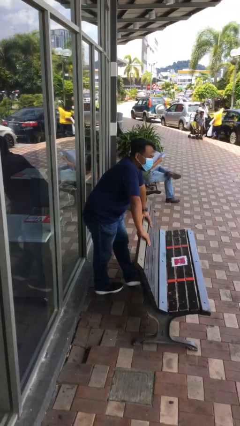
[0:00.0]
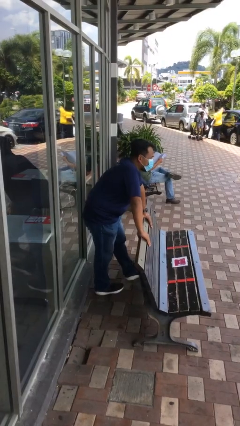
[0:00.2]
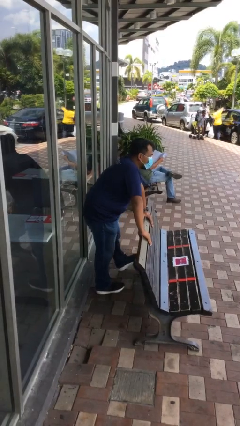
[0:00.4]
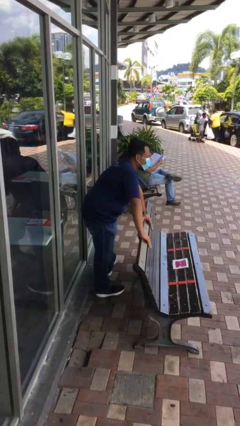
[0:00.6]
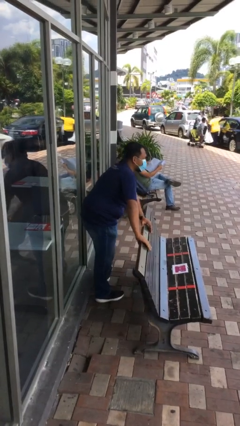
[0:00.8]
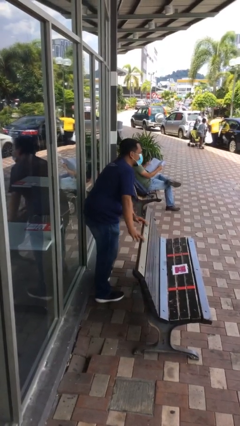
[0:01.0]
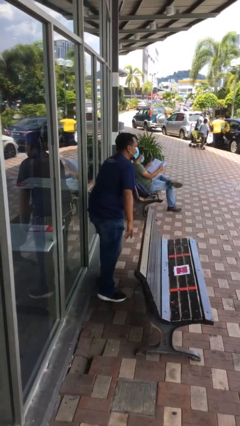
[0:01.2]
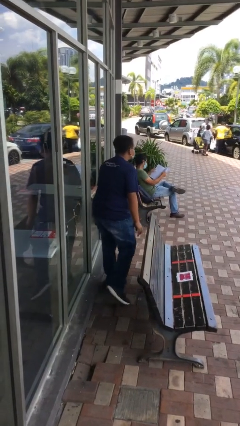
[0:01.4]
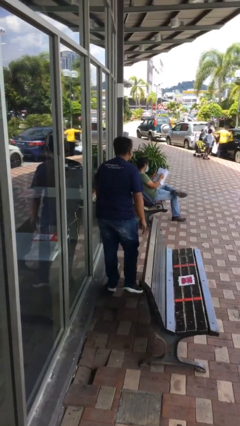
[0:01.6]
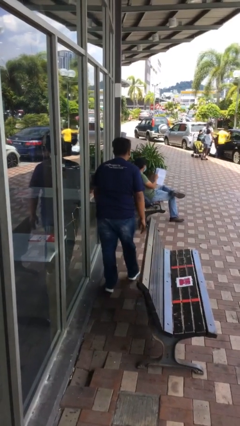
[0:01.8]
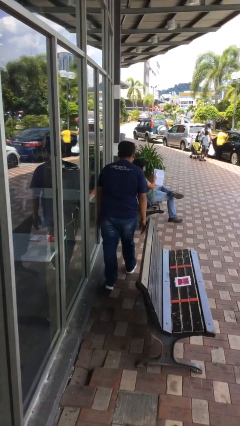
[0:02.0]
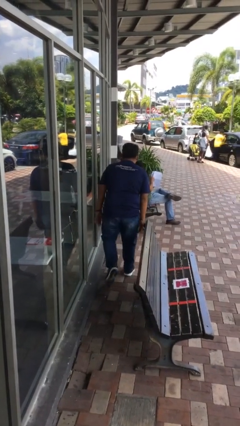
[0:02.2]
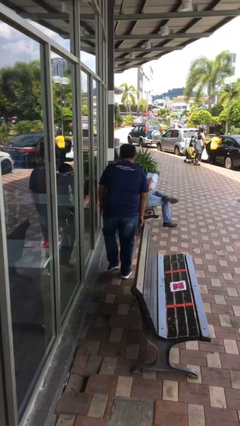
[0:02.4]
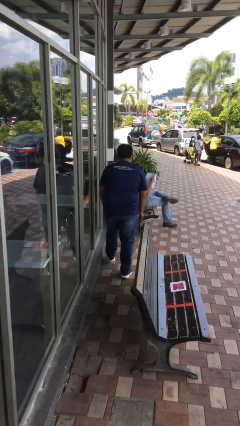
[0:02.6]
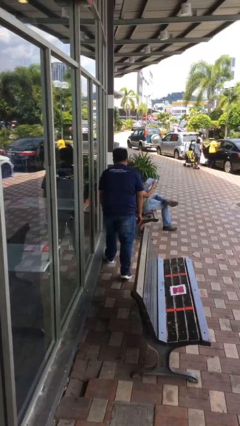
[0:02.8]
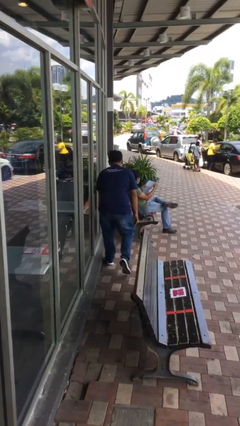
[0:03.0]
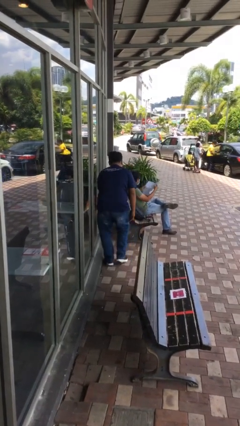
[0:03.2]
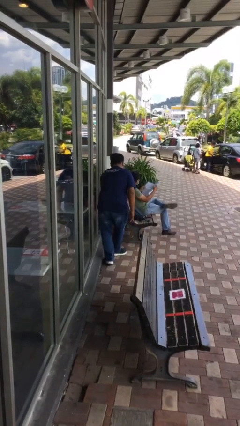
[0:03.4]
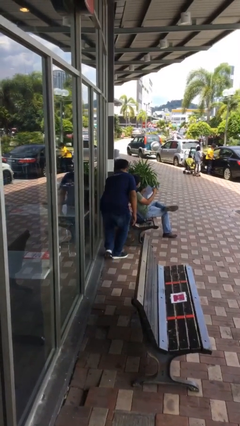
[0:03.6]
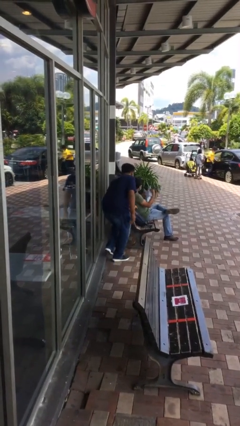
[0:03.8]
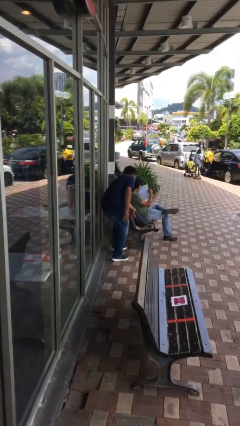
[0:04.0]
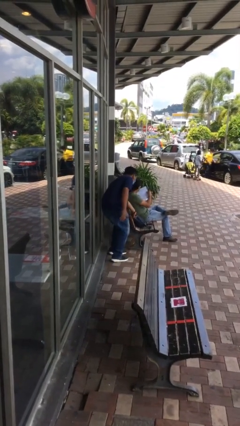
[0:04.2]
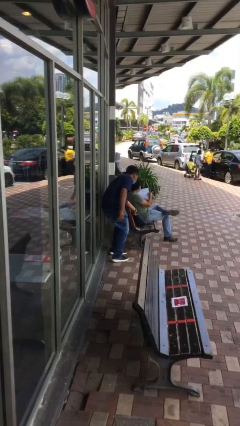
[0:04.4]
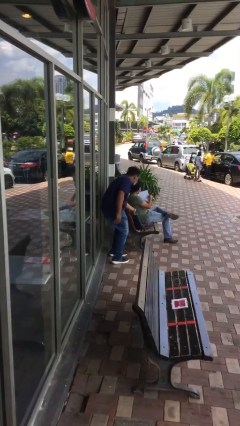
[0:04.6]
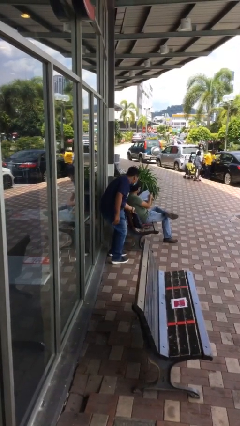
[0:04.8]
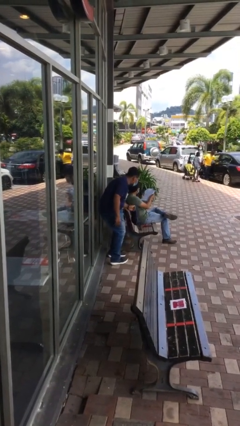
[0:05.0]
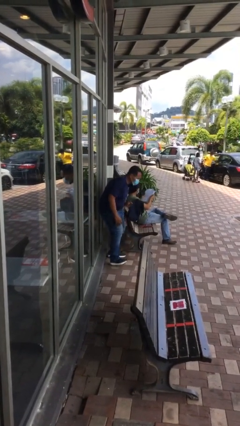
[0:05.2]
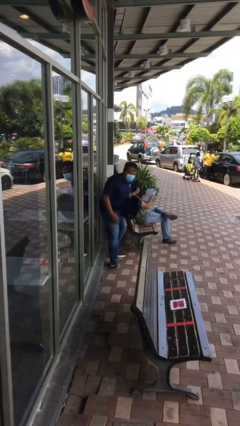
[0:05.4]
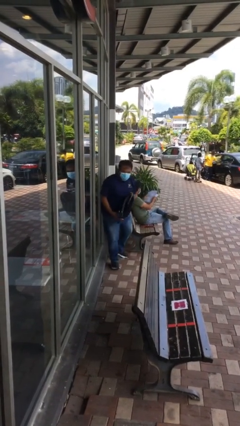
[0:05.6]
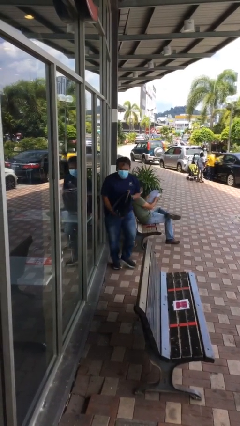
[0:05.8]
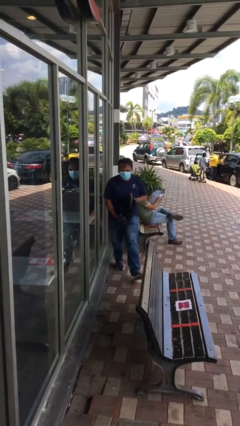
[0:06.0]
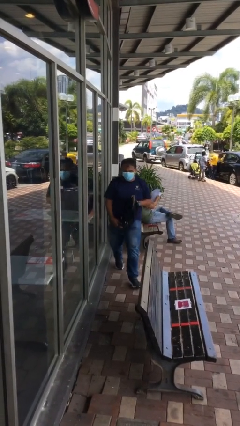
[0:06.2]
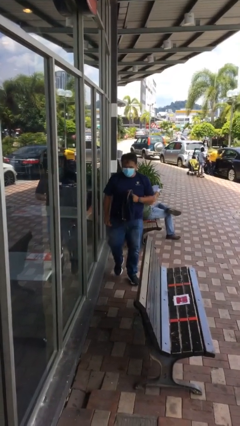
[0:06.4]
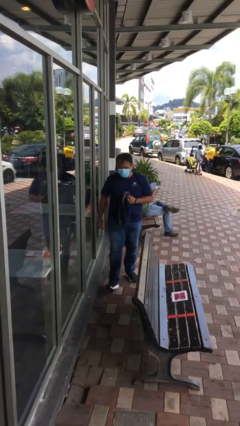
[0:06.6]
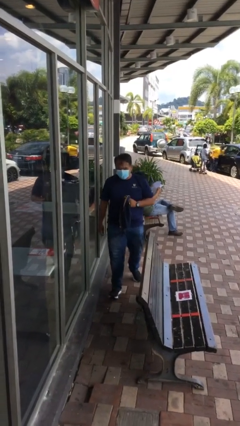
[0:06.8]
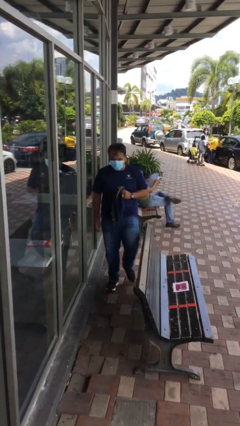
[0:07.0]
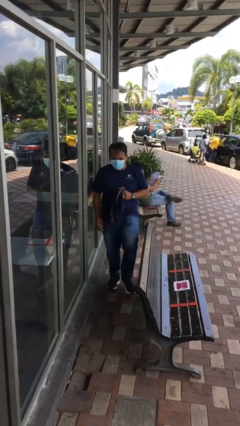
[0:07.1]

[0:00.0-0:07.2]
person steals object from person

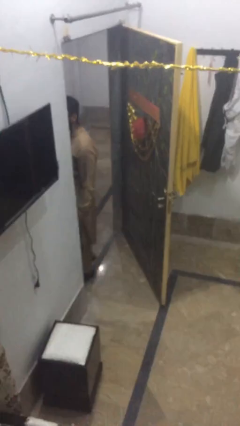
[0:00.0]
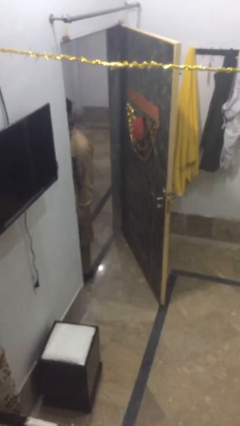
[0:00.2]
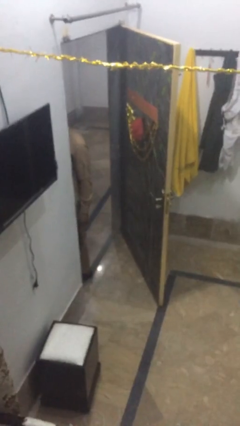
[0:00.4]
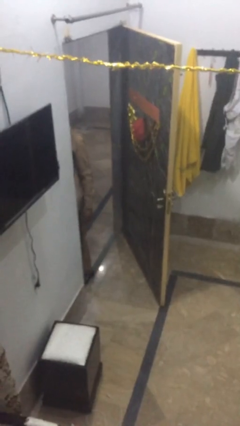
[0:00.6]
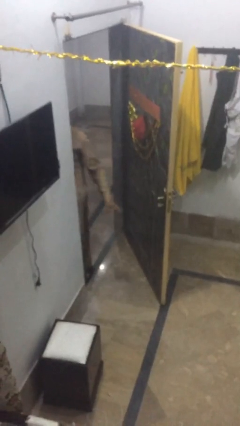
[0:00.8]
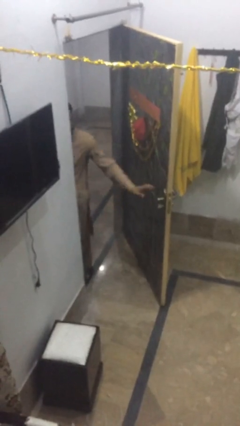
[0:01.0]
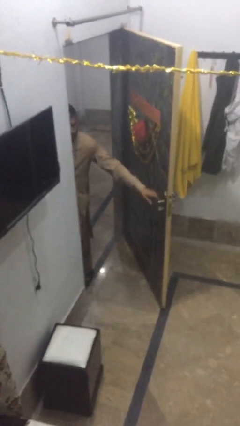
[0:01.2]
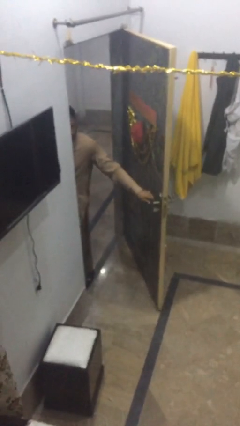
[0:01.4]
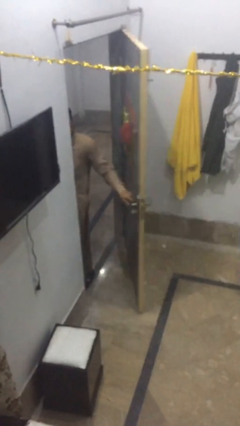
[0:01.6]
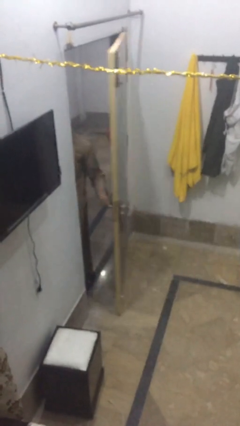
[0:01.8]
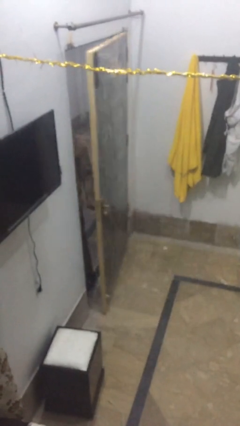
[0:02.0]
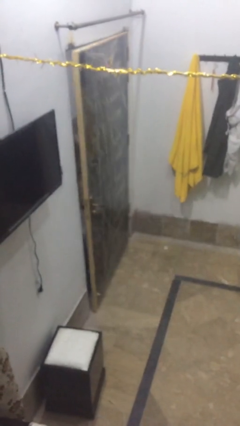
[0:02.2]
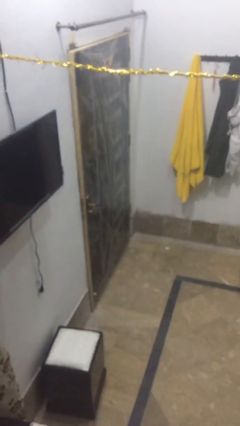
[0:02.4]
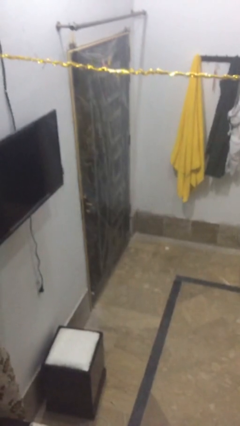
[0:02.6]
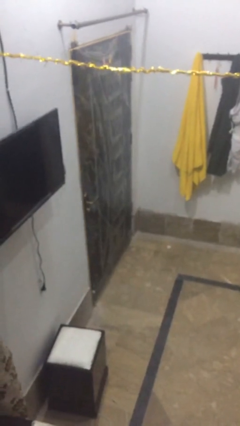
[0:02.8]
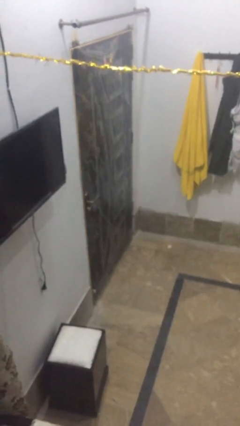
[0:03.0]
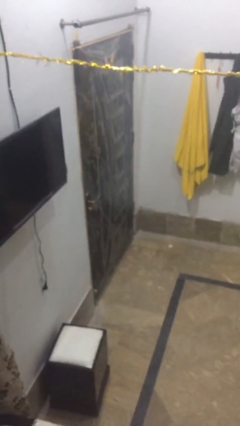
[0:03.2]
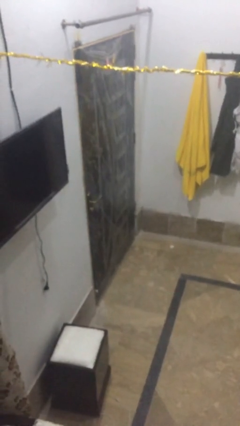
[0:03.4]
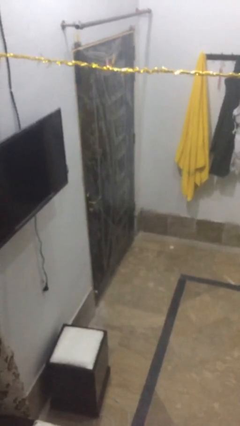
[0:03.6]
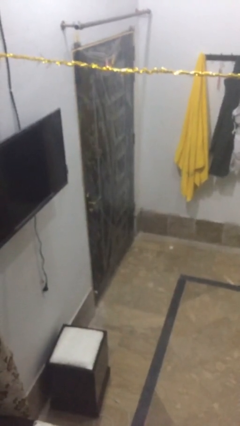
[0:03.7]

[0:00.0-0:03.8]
person closes facility door

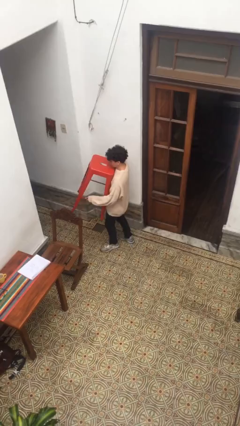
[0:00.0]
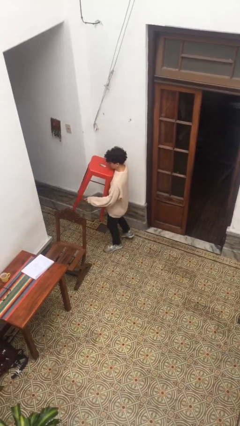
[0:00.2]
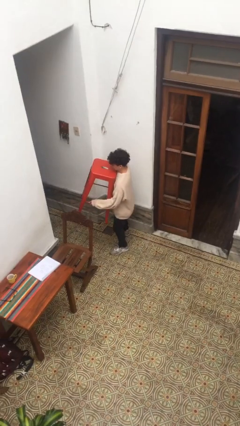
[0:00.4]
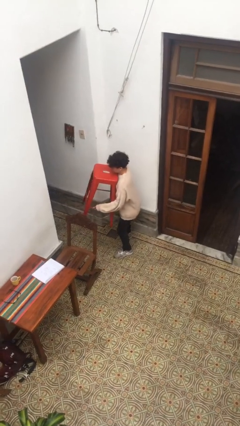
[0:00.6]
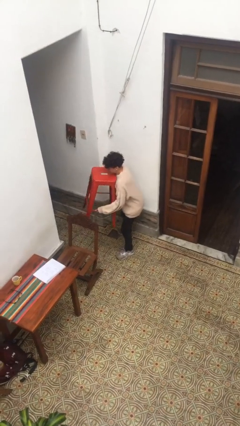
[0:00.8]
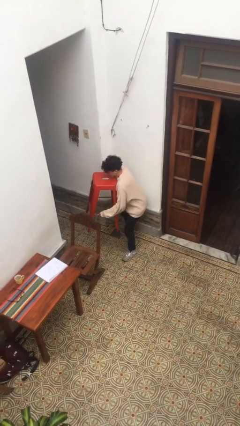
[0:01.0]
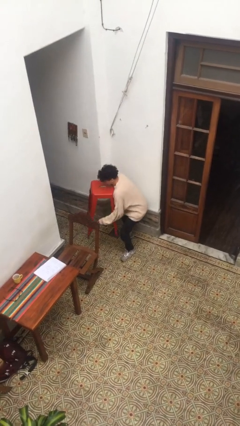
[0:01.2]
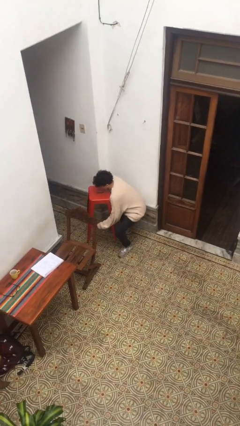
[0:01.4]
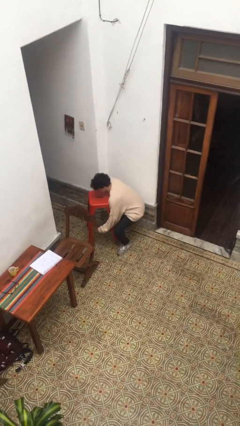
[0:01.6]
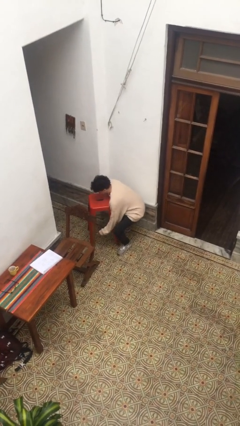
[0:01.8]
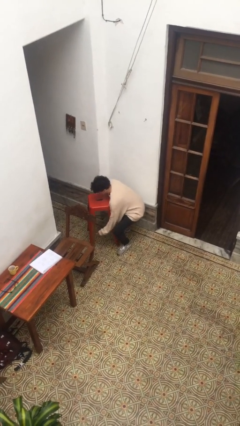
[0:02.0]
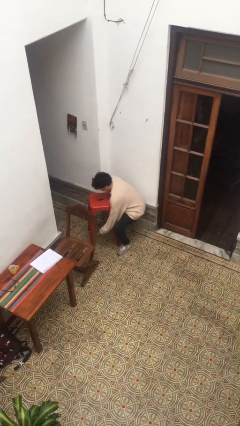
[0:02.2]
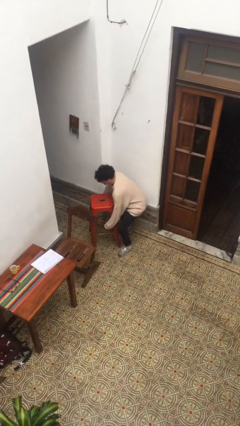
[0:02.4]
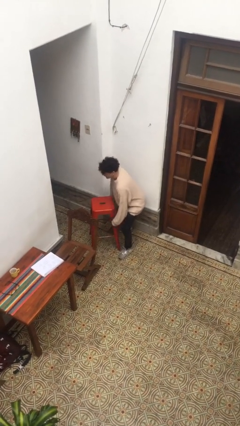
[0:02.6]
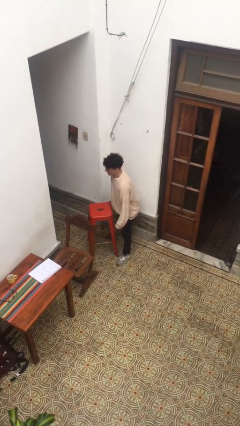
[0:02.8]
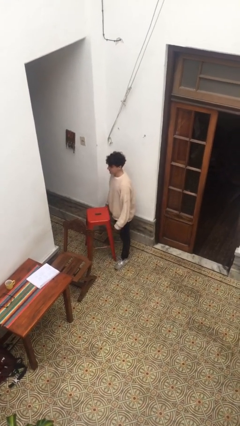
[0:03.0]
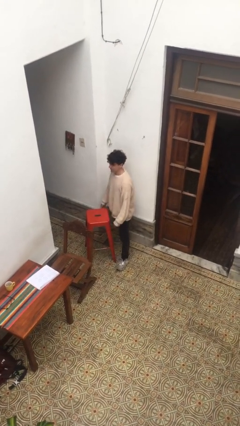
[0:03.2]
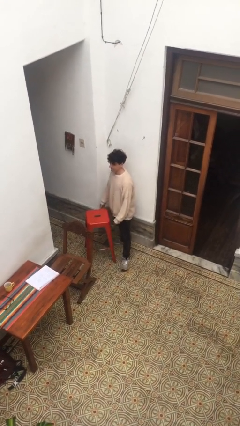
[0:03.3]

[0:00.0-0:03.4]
person puts down object on floor

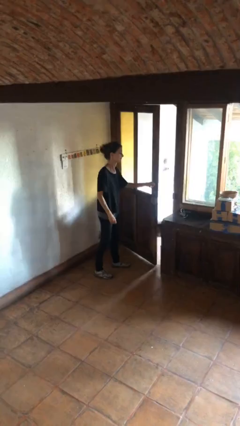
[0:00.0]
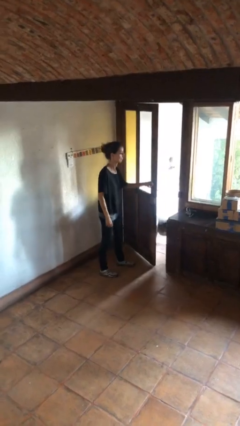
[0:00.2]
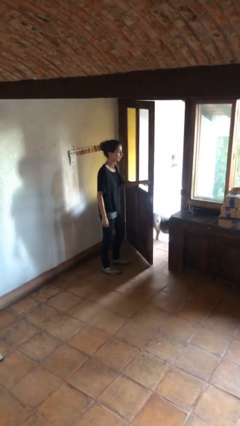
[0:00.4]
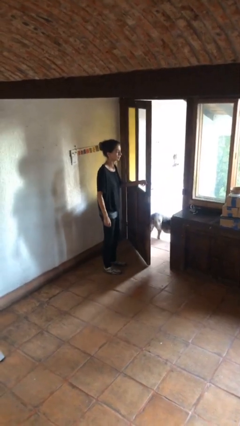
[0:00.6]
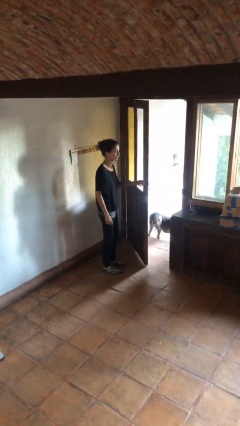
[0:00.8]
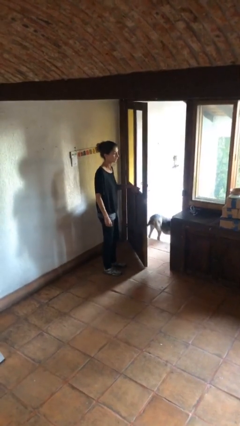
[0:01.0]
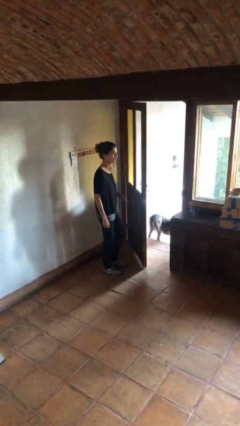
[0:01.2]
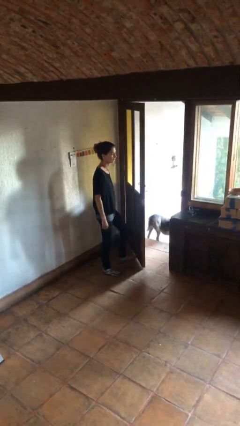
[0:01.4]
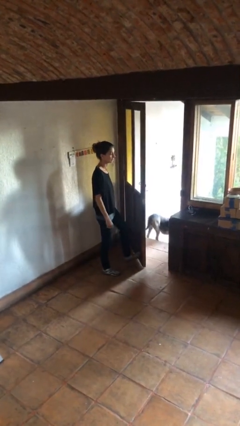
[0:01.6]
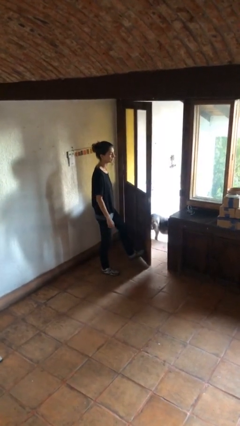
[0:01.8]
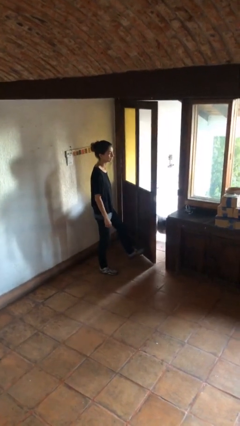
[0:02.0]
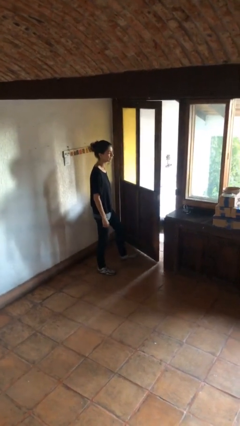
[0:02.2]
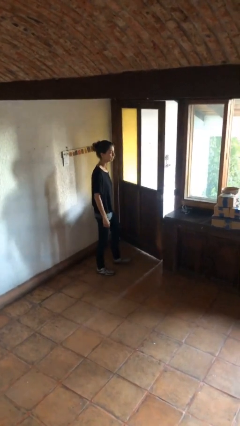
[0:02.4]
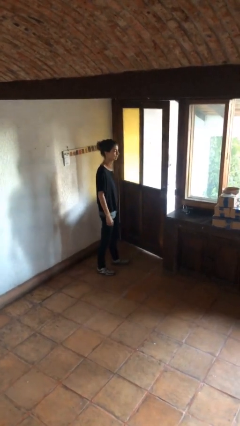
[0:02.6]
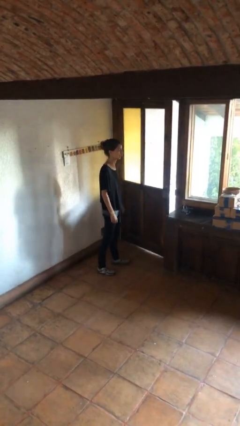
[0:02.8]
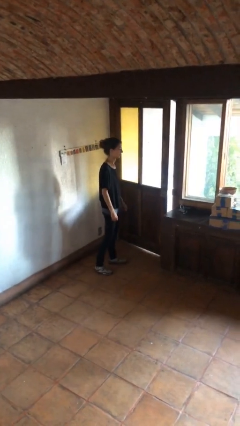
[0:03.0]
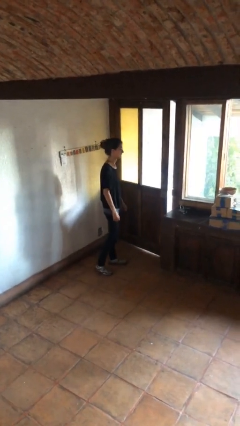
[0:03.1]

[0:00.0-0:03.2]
person closes door with foot

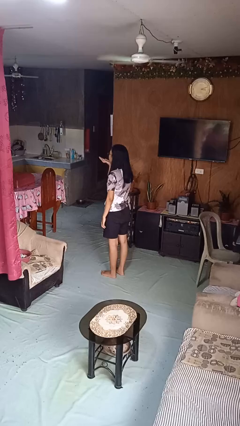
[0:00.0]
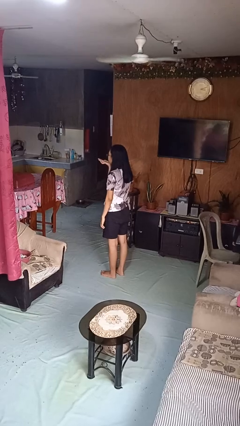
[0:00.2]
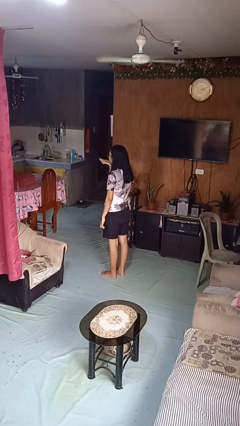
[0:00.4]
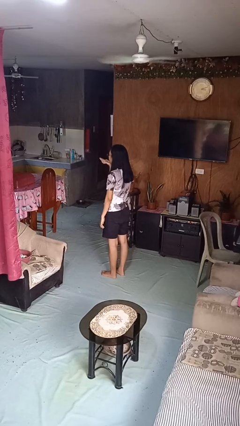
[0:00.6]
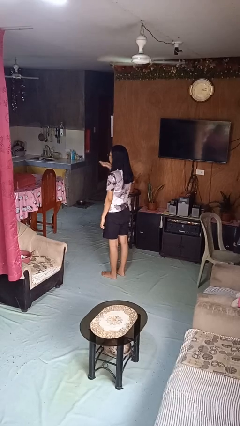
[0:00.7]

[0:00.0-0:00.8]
person gestures blow kiss
